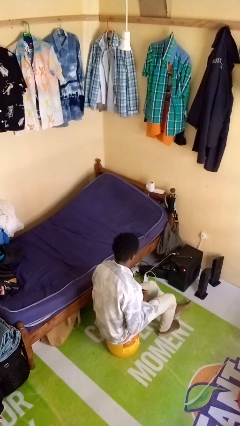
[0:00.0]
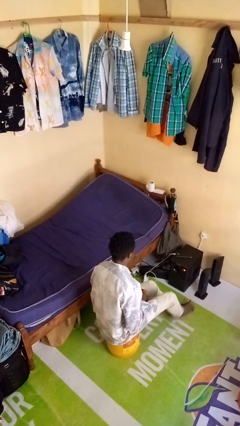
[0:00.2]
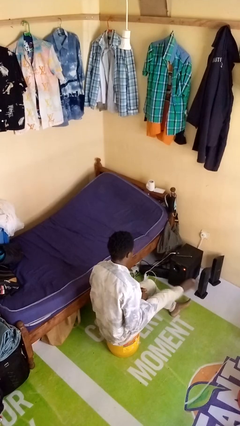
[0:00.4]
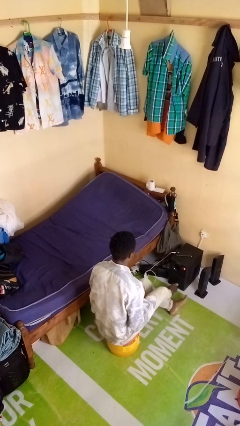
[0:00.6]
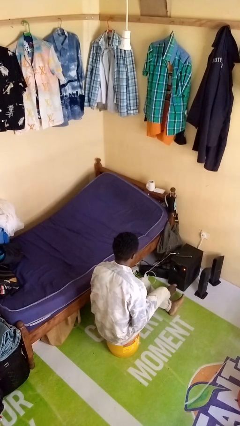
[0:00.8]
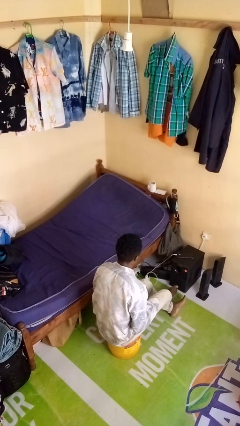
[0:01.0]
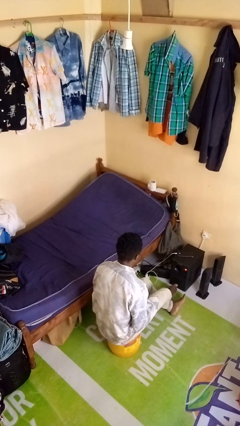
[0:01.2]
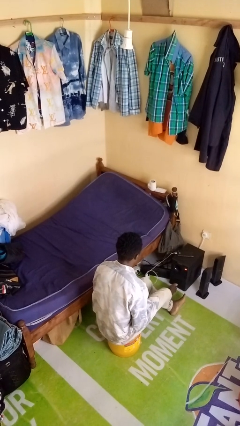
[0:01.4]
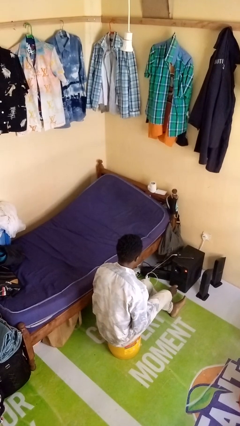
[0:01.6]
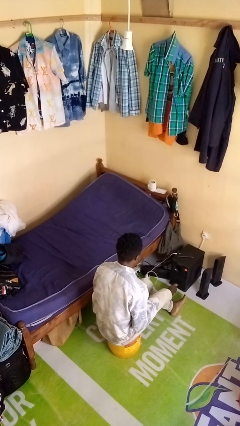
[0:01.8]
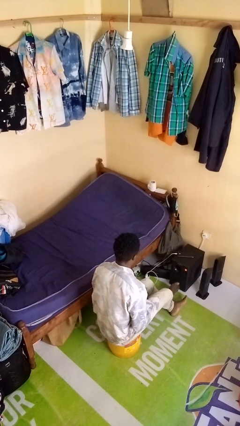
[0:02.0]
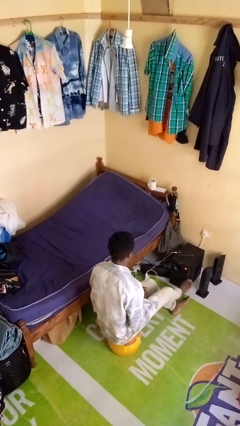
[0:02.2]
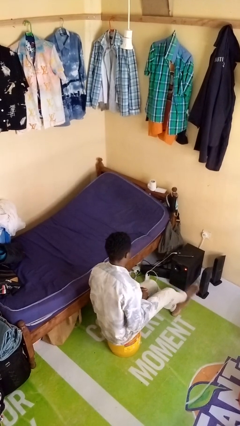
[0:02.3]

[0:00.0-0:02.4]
person crosses legs

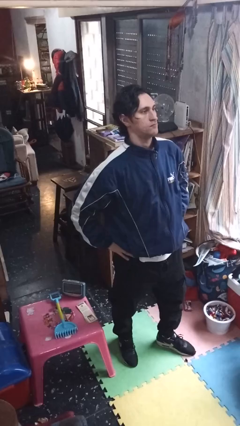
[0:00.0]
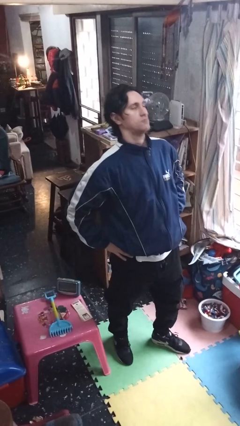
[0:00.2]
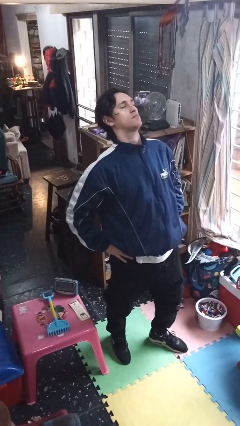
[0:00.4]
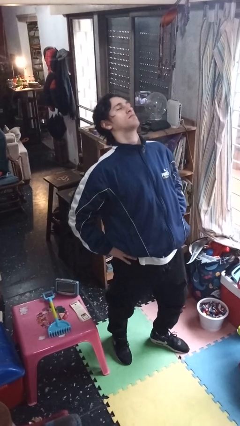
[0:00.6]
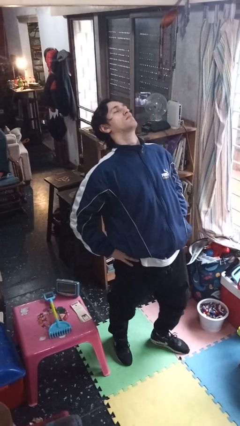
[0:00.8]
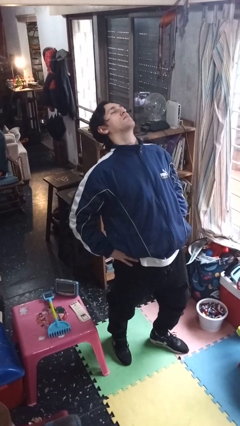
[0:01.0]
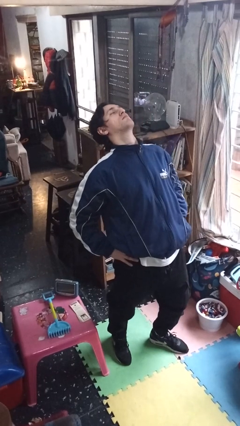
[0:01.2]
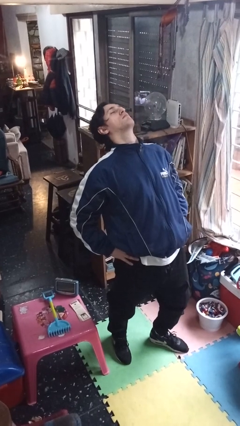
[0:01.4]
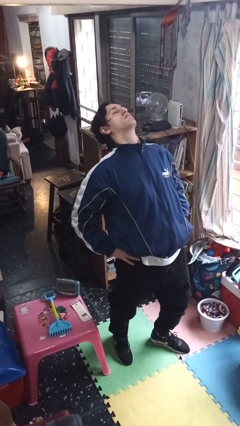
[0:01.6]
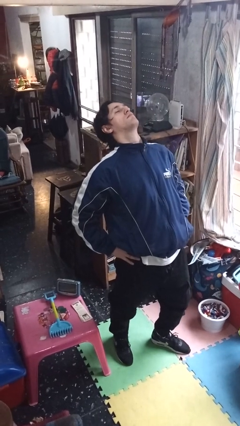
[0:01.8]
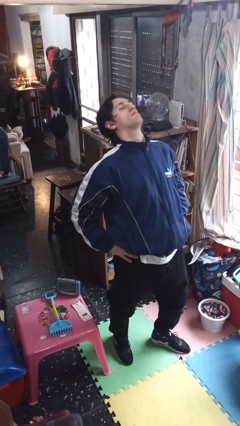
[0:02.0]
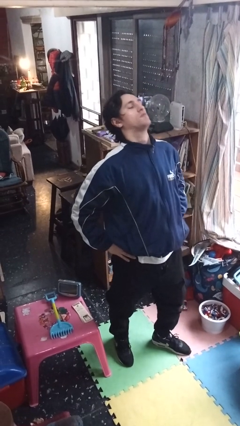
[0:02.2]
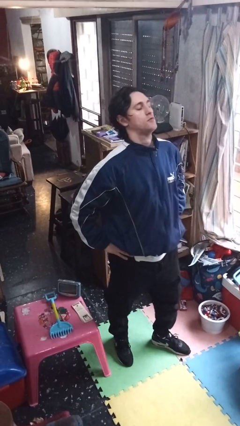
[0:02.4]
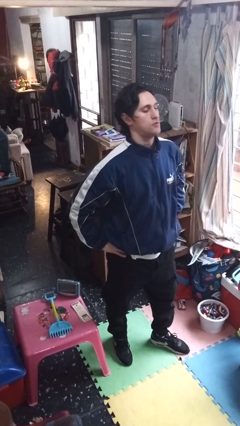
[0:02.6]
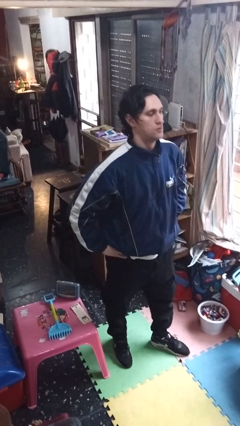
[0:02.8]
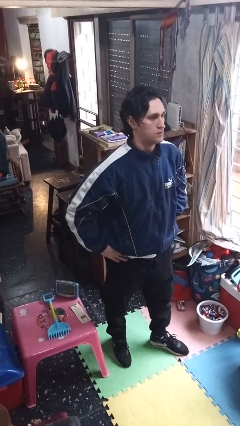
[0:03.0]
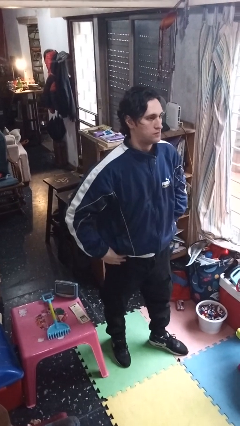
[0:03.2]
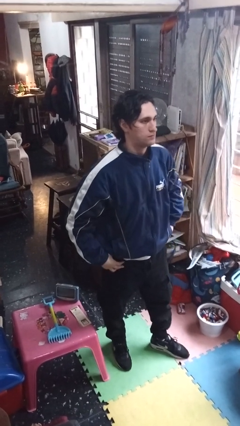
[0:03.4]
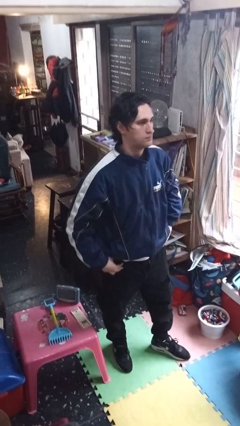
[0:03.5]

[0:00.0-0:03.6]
person stretches back

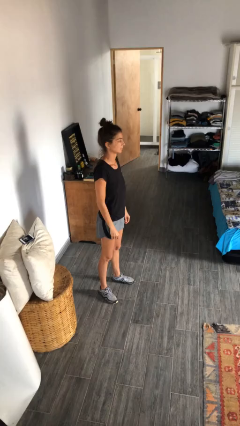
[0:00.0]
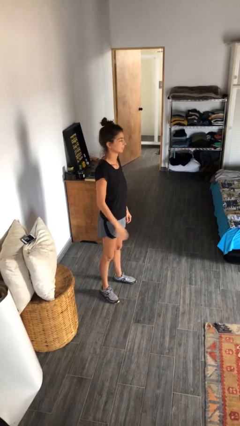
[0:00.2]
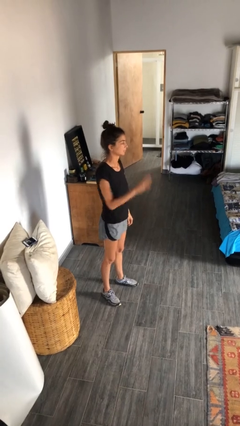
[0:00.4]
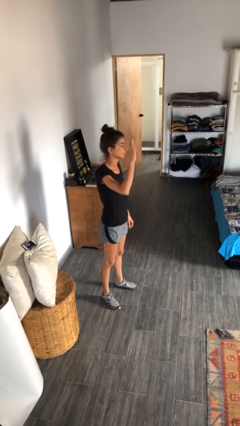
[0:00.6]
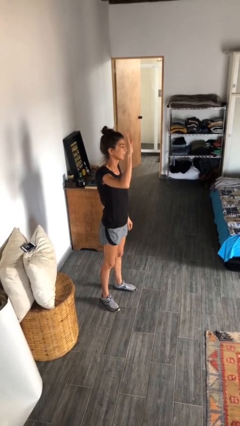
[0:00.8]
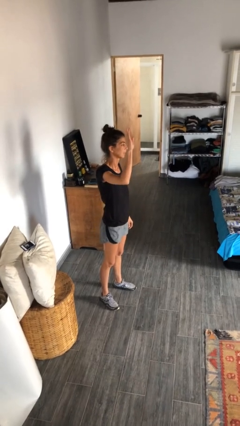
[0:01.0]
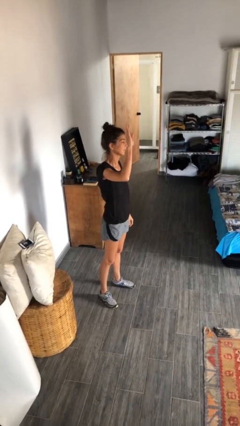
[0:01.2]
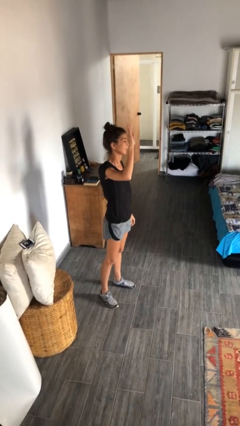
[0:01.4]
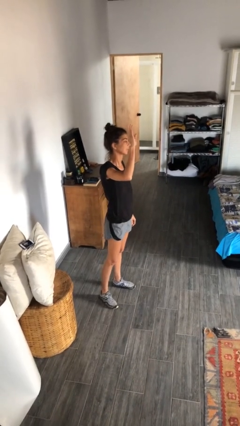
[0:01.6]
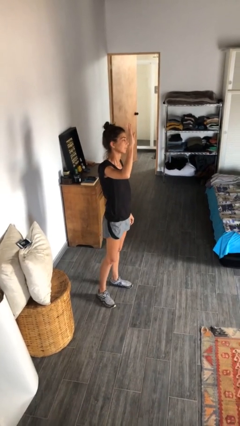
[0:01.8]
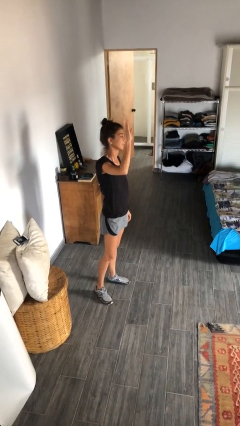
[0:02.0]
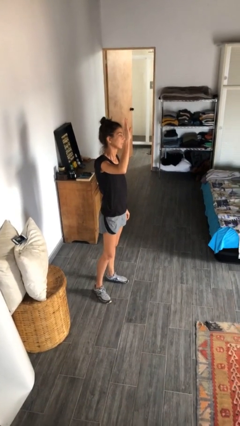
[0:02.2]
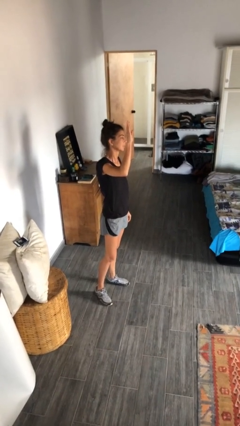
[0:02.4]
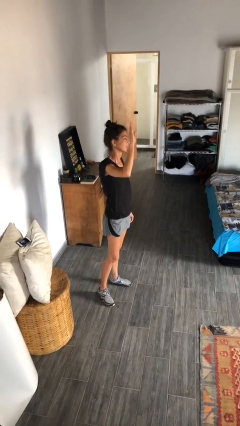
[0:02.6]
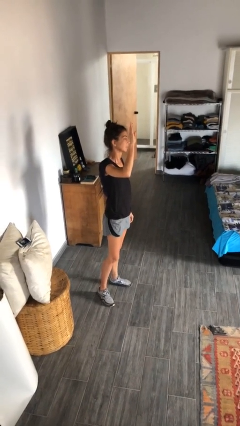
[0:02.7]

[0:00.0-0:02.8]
person gestures raise hand

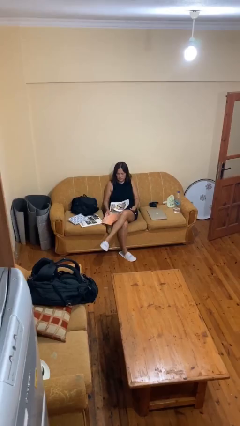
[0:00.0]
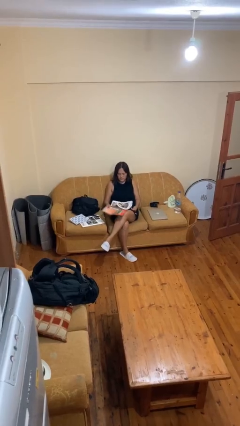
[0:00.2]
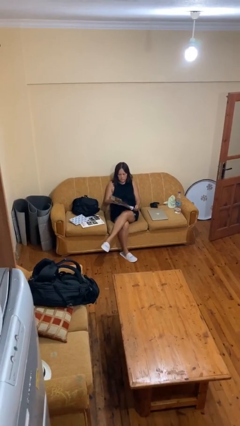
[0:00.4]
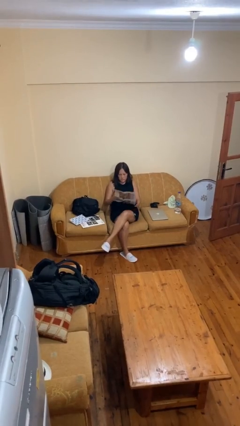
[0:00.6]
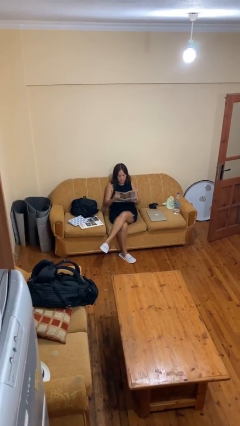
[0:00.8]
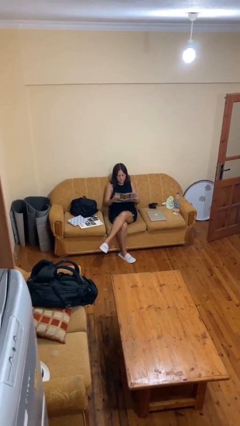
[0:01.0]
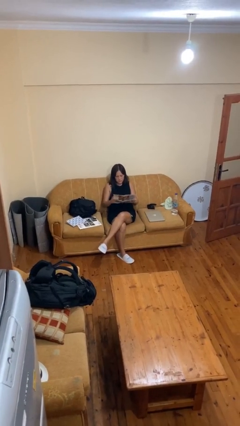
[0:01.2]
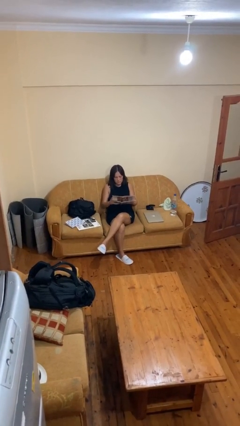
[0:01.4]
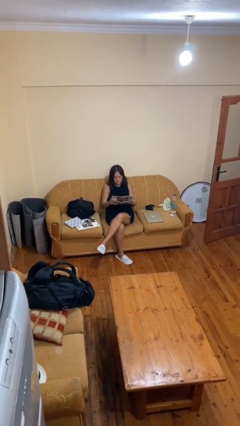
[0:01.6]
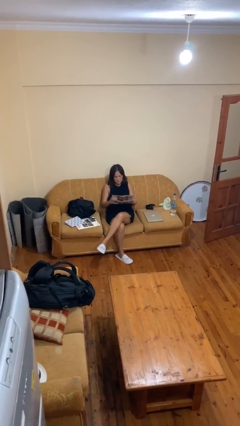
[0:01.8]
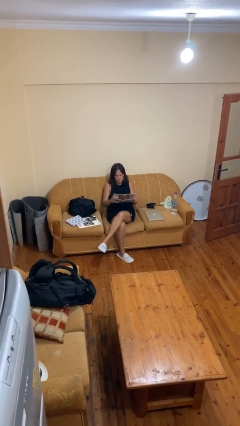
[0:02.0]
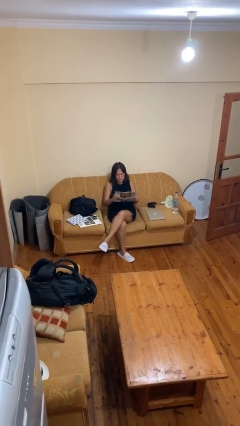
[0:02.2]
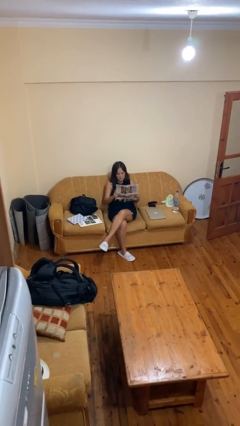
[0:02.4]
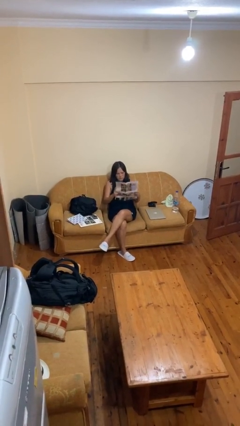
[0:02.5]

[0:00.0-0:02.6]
person reads newspaper

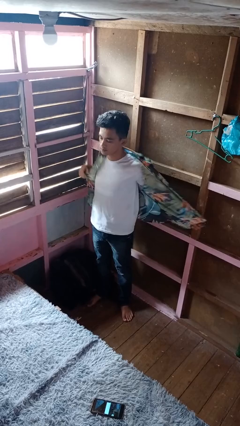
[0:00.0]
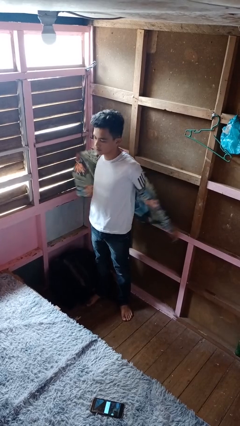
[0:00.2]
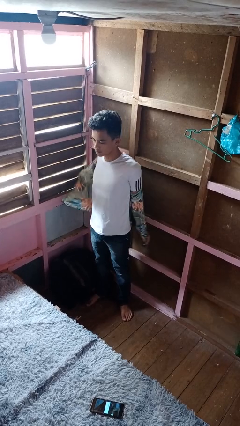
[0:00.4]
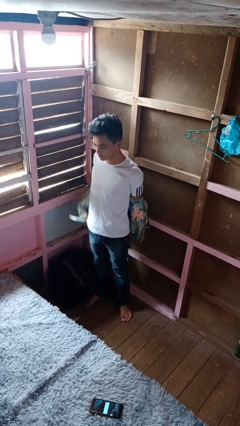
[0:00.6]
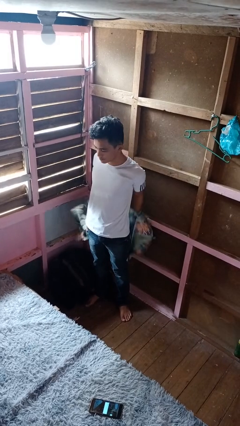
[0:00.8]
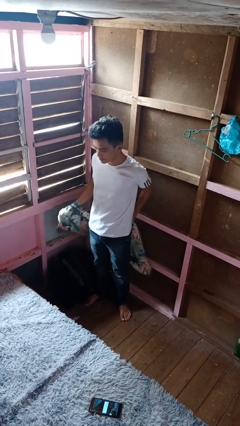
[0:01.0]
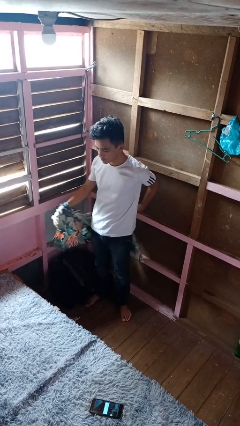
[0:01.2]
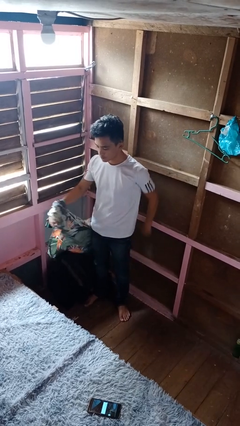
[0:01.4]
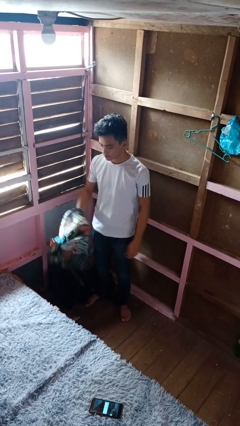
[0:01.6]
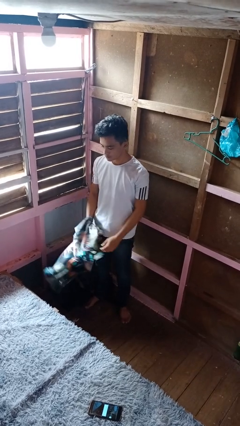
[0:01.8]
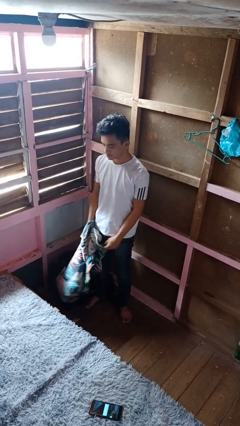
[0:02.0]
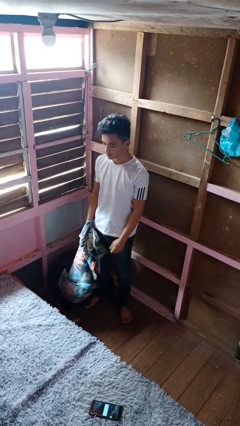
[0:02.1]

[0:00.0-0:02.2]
person takes off shirt

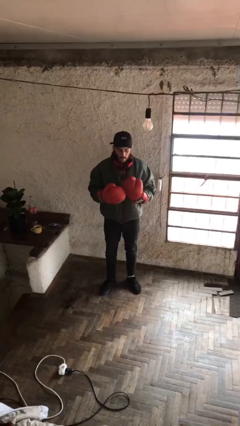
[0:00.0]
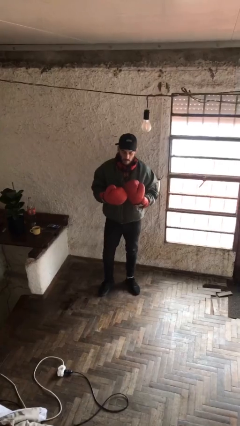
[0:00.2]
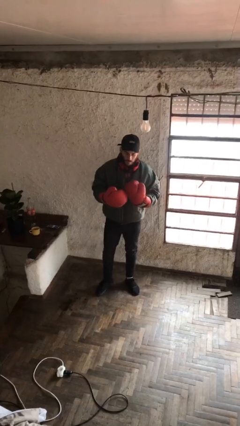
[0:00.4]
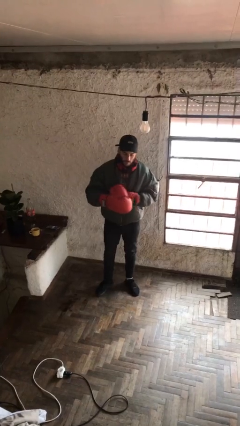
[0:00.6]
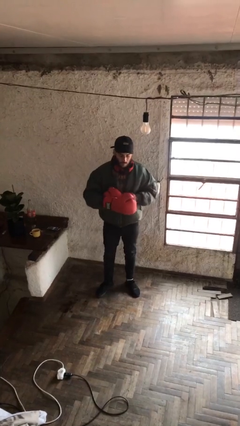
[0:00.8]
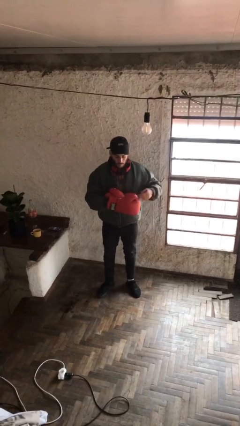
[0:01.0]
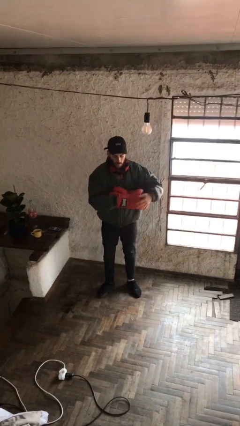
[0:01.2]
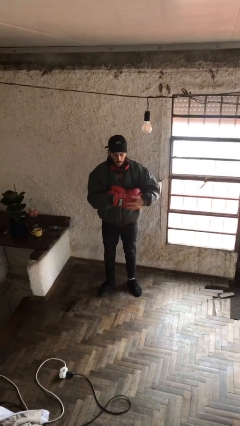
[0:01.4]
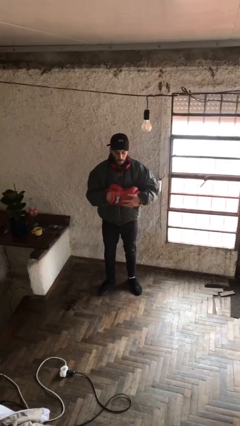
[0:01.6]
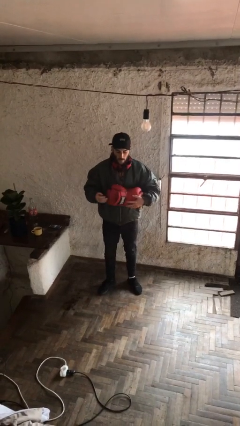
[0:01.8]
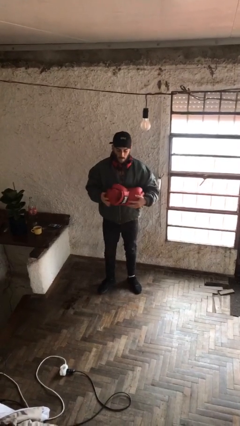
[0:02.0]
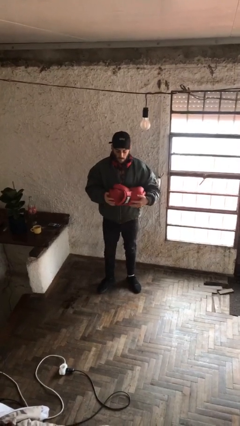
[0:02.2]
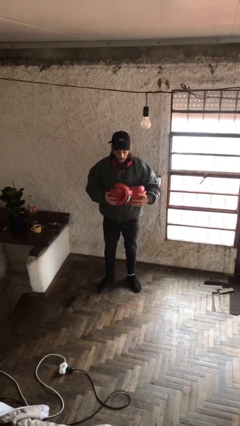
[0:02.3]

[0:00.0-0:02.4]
person takes off gloves

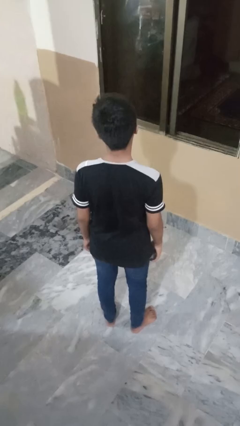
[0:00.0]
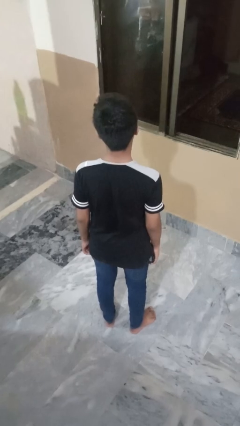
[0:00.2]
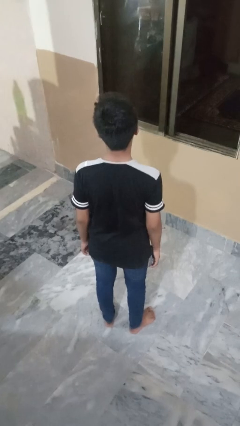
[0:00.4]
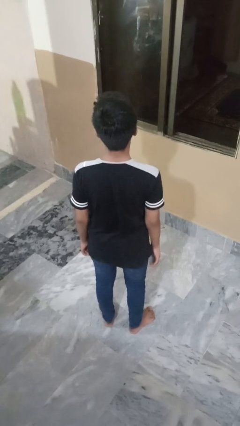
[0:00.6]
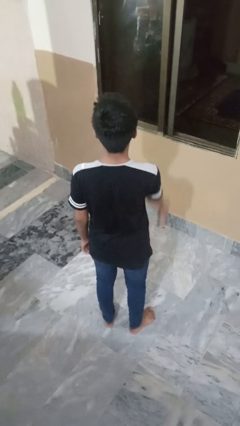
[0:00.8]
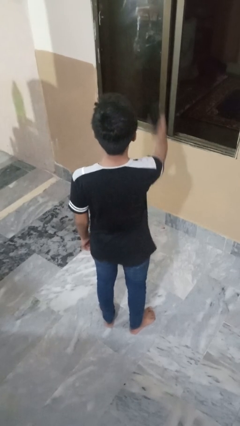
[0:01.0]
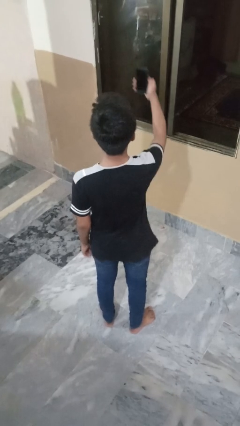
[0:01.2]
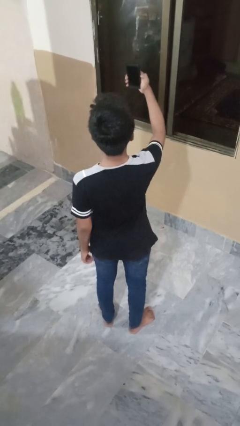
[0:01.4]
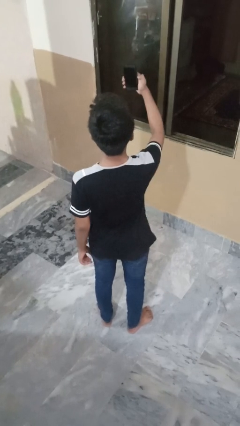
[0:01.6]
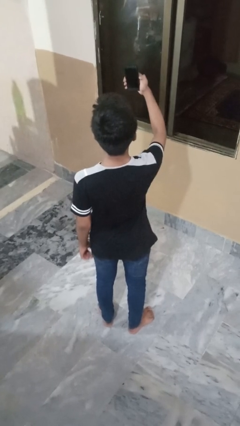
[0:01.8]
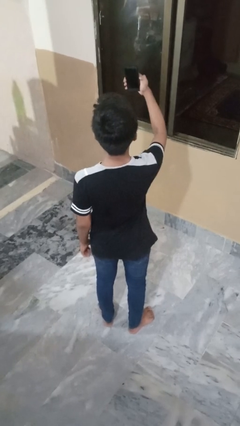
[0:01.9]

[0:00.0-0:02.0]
person takes selfie
